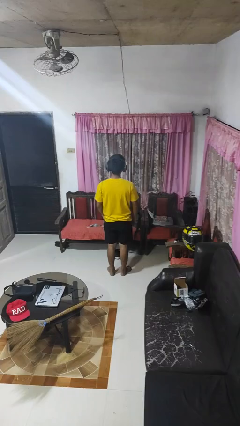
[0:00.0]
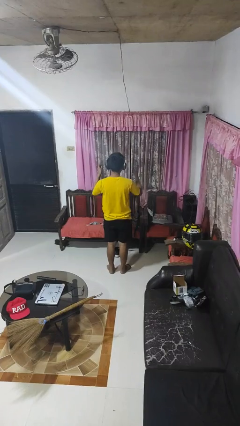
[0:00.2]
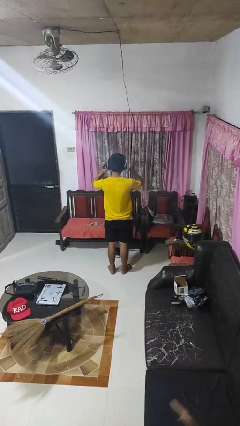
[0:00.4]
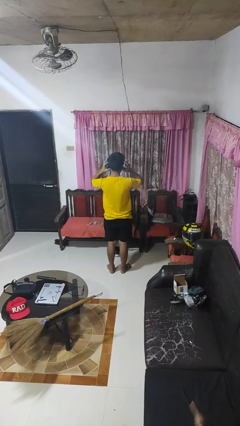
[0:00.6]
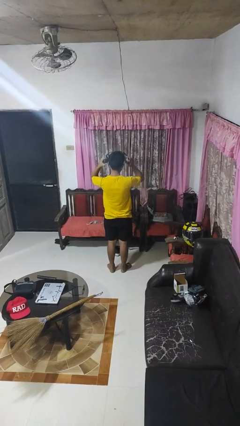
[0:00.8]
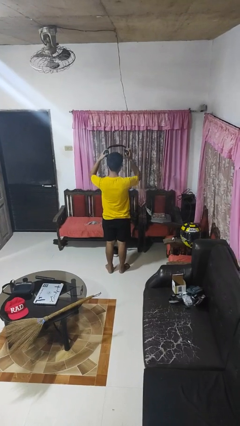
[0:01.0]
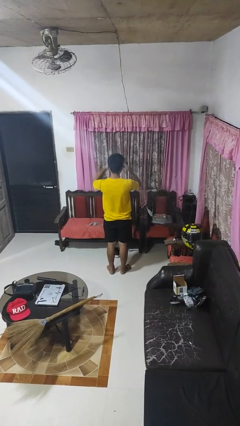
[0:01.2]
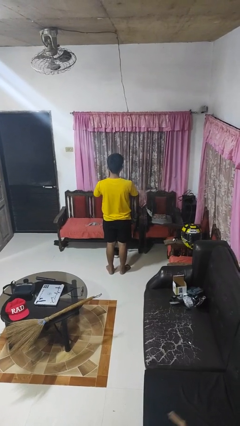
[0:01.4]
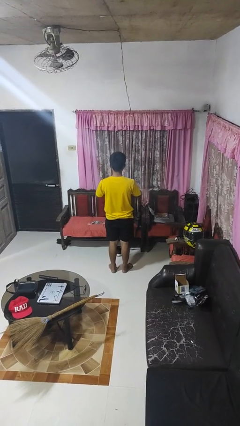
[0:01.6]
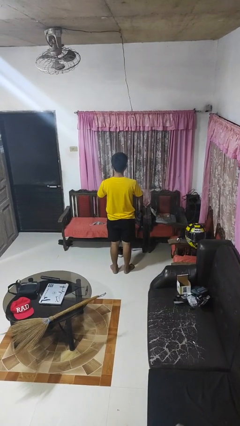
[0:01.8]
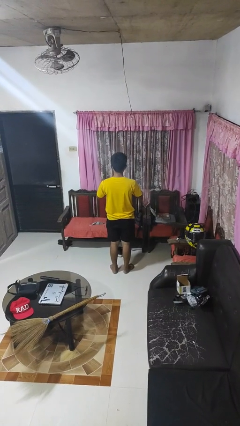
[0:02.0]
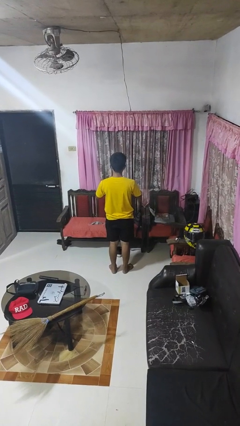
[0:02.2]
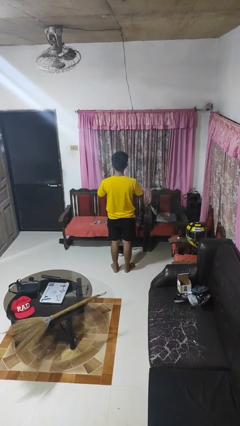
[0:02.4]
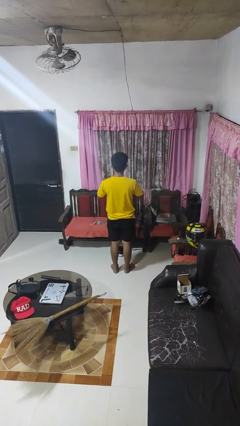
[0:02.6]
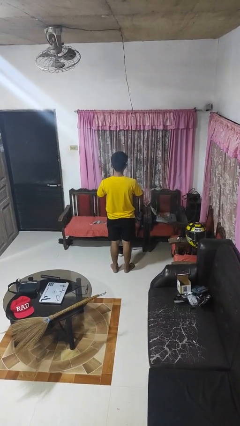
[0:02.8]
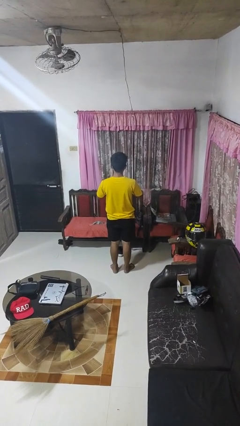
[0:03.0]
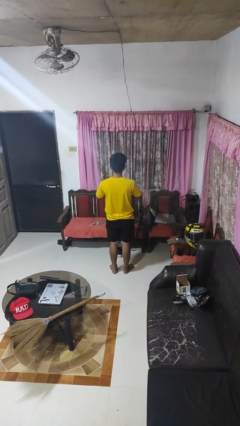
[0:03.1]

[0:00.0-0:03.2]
person takes off headphones

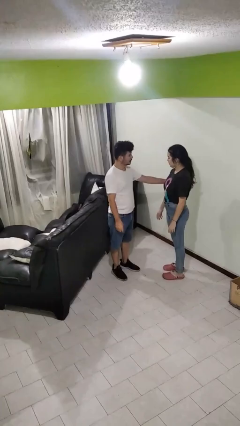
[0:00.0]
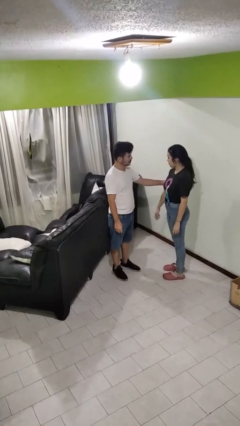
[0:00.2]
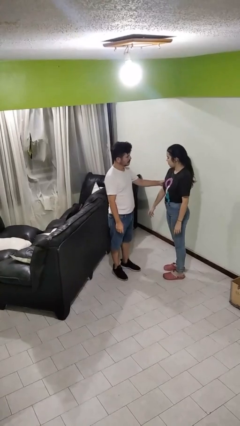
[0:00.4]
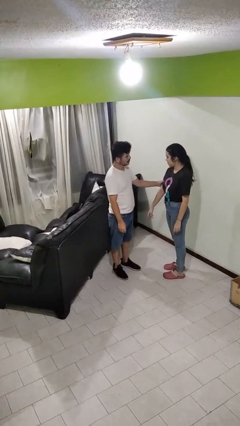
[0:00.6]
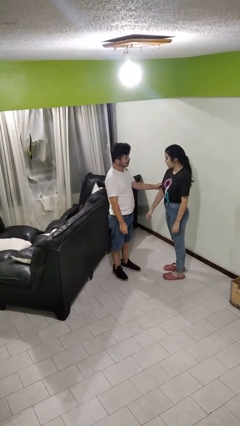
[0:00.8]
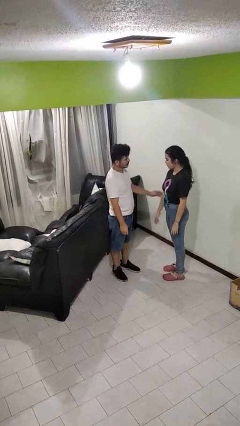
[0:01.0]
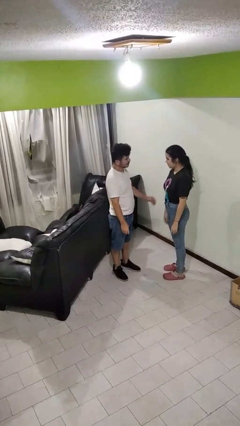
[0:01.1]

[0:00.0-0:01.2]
person grabs person by bicep

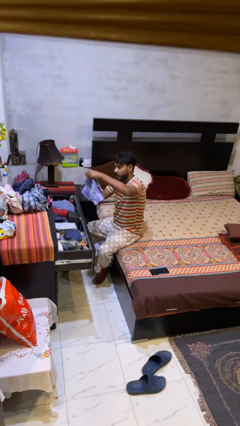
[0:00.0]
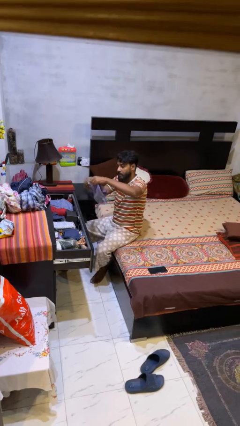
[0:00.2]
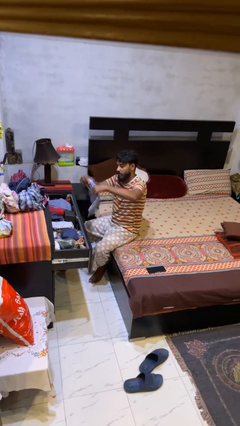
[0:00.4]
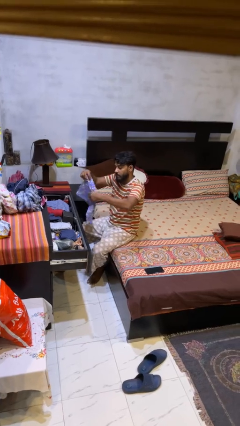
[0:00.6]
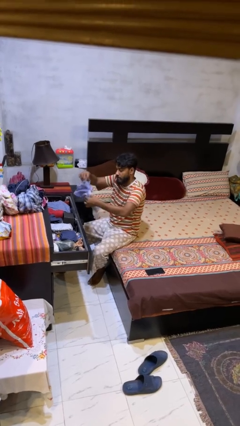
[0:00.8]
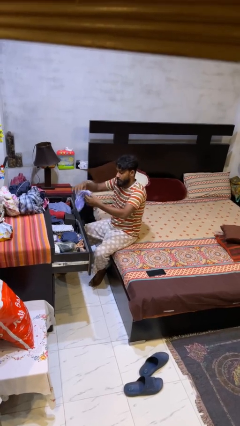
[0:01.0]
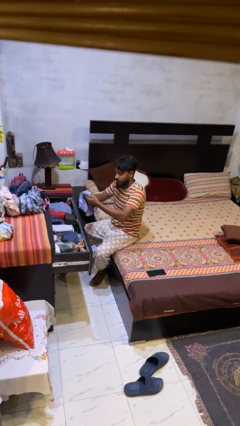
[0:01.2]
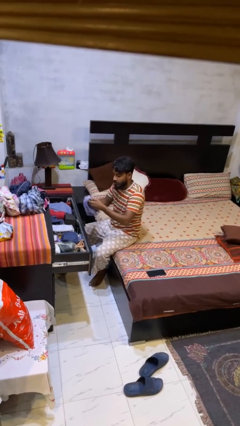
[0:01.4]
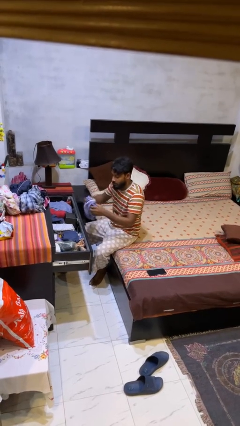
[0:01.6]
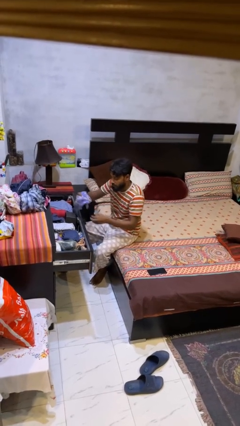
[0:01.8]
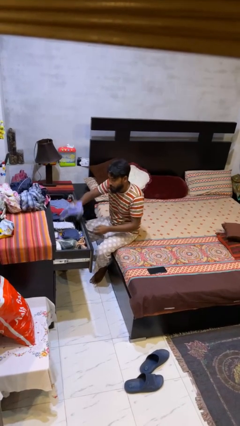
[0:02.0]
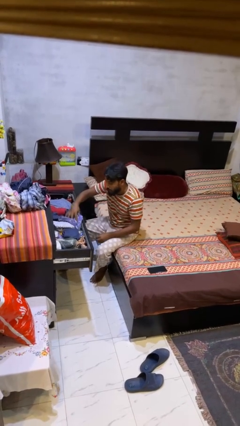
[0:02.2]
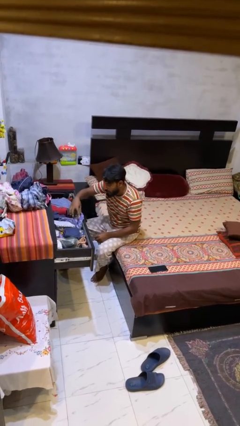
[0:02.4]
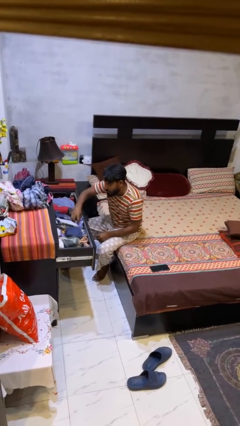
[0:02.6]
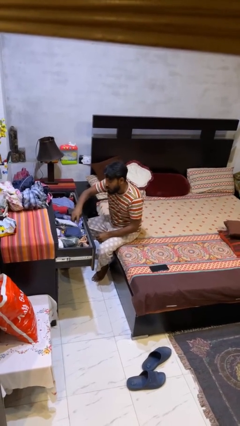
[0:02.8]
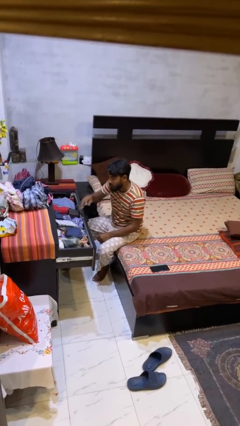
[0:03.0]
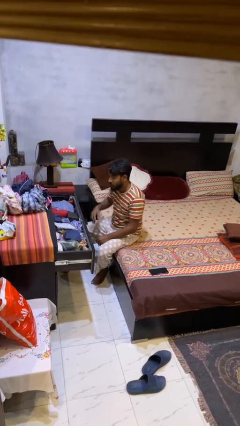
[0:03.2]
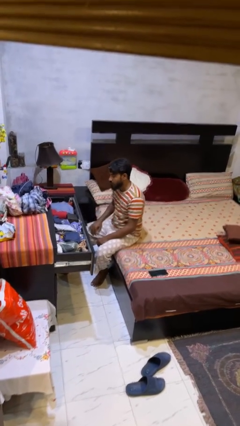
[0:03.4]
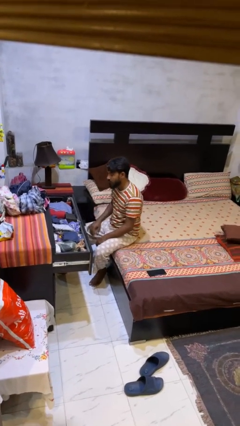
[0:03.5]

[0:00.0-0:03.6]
person puts clothes into dresser

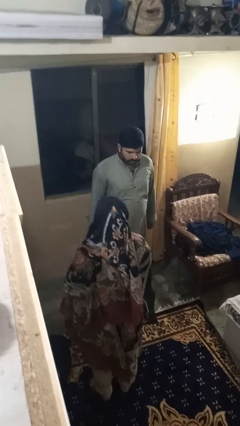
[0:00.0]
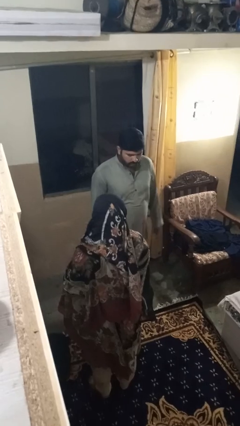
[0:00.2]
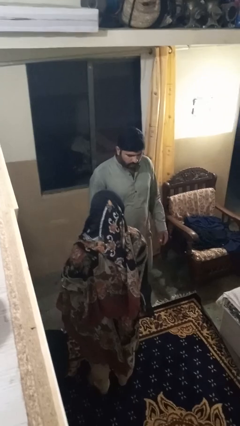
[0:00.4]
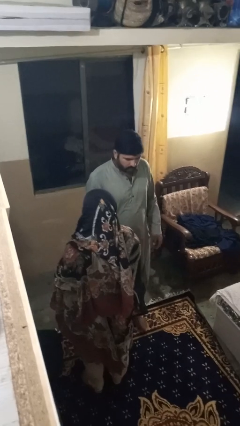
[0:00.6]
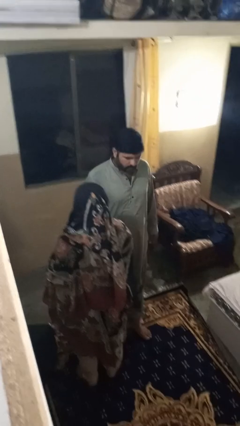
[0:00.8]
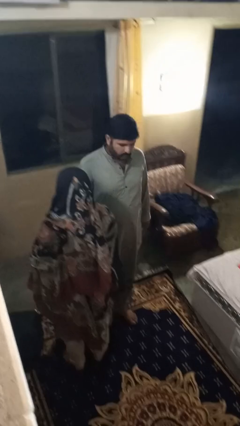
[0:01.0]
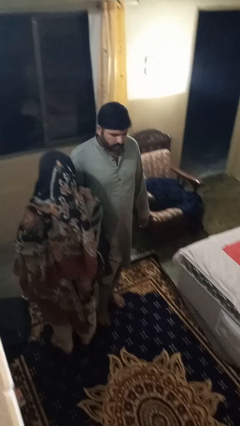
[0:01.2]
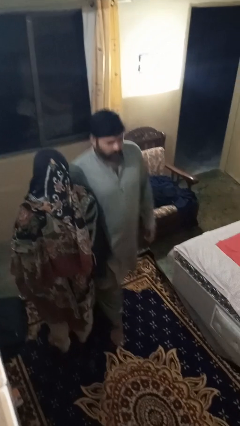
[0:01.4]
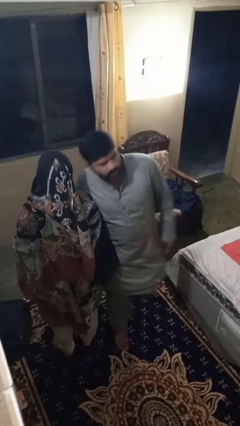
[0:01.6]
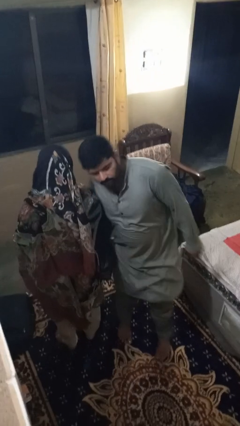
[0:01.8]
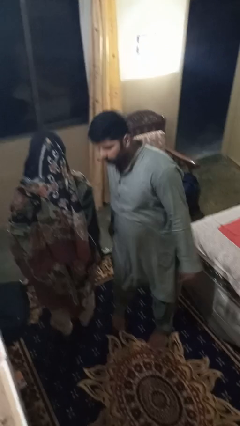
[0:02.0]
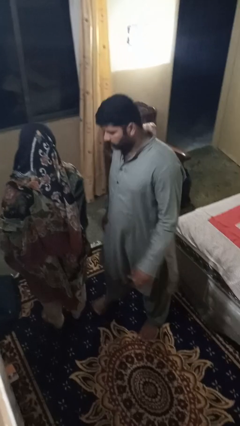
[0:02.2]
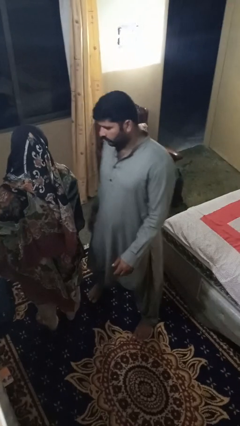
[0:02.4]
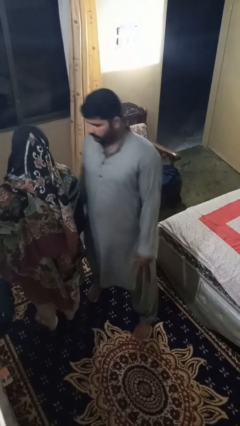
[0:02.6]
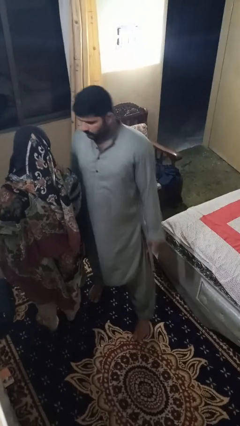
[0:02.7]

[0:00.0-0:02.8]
person bumps into person

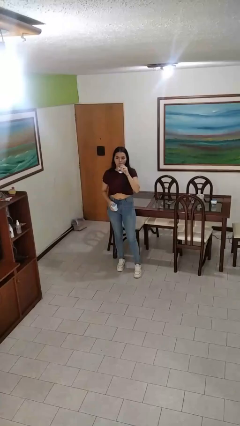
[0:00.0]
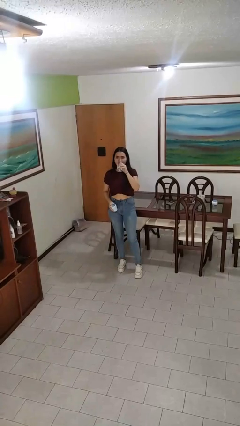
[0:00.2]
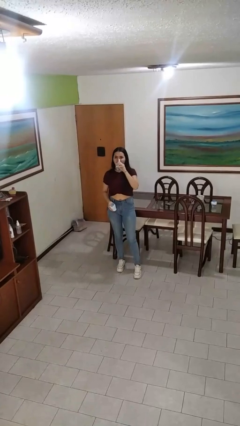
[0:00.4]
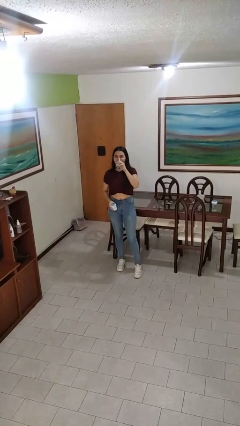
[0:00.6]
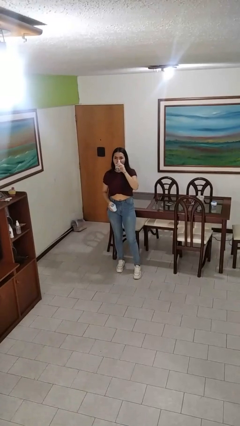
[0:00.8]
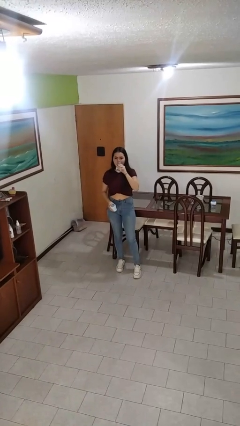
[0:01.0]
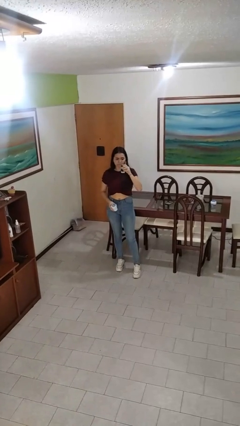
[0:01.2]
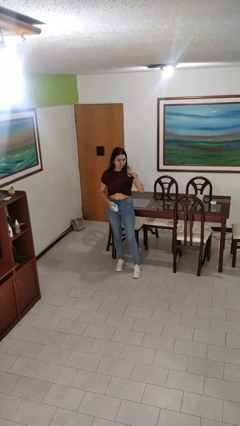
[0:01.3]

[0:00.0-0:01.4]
person drinks from cup

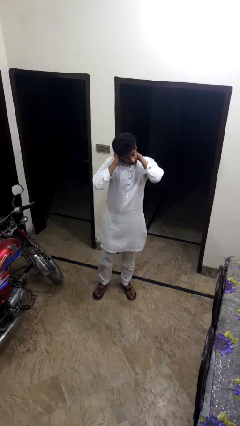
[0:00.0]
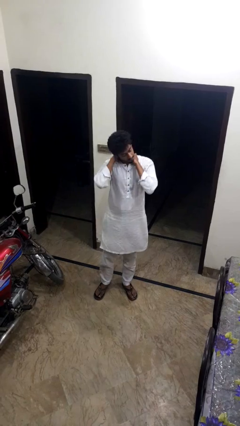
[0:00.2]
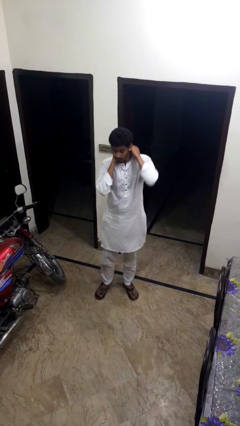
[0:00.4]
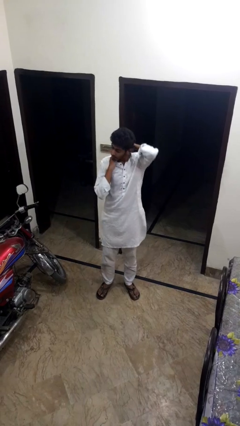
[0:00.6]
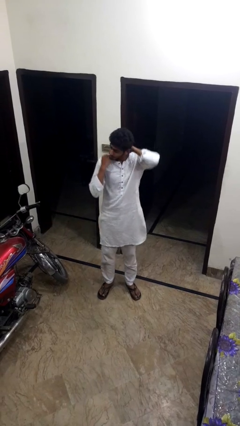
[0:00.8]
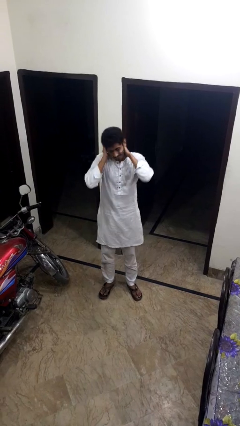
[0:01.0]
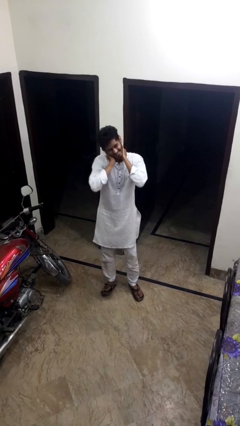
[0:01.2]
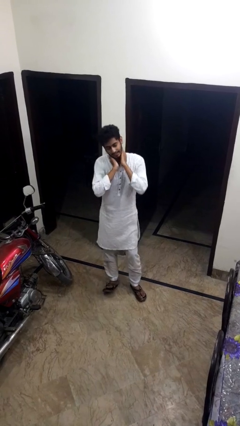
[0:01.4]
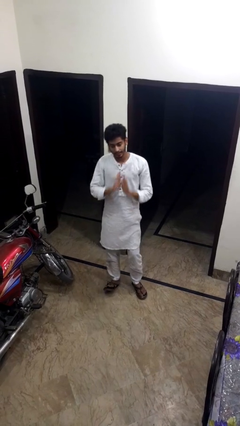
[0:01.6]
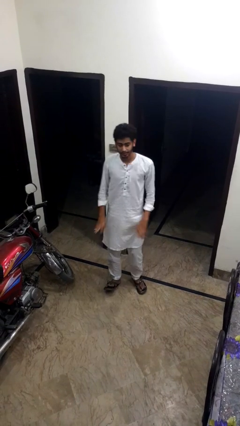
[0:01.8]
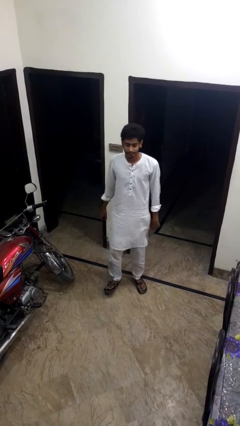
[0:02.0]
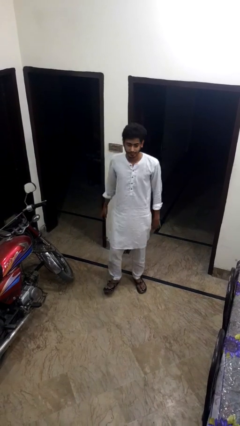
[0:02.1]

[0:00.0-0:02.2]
person rubs neck

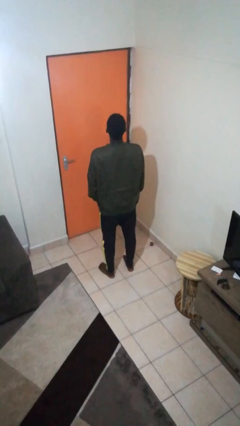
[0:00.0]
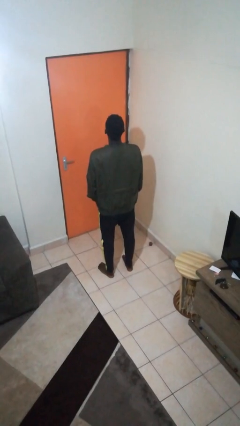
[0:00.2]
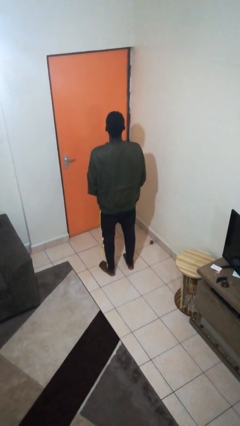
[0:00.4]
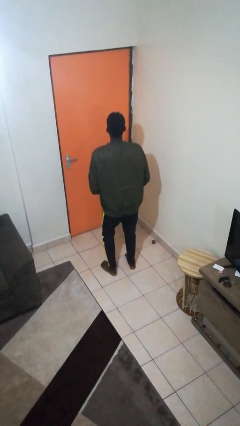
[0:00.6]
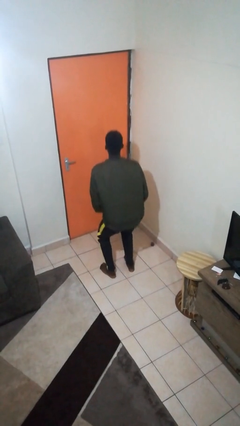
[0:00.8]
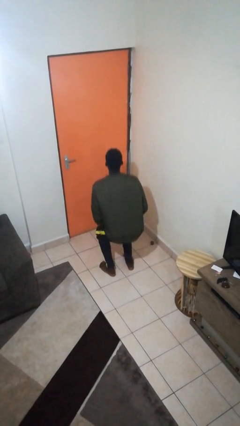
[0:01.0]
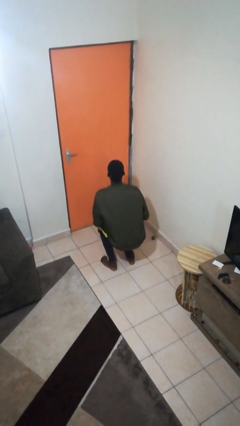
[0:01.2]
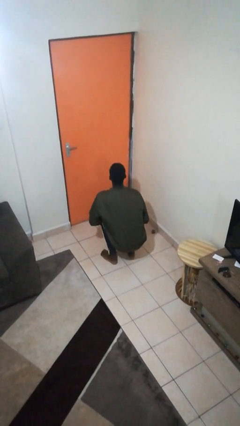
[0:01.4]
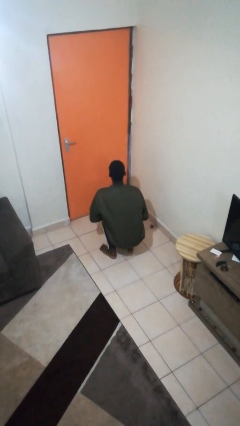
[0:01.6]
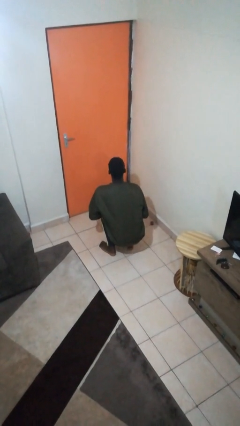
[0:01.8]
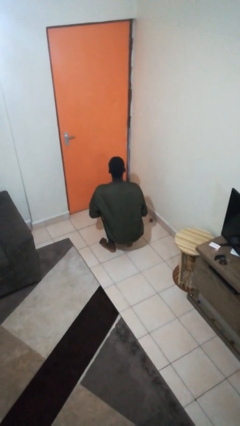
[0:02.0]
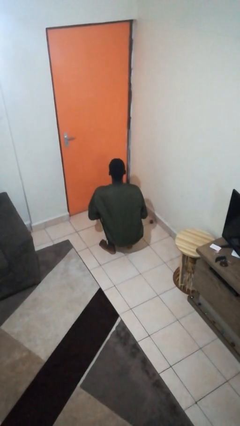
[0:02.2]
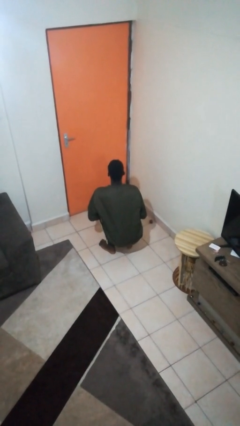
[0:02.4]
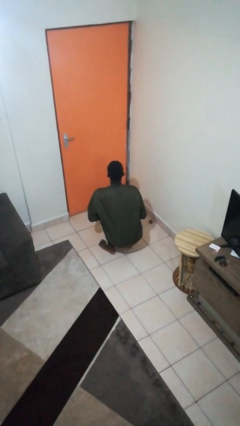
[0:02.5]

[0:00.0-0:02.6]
person squats
